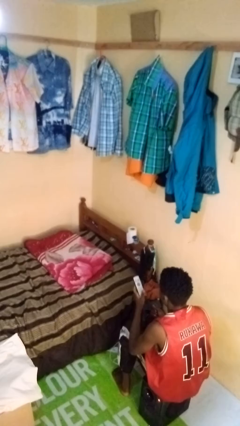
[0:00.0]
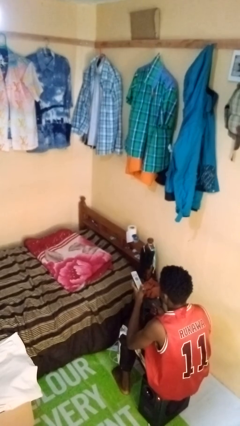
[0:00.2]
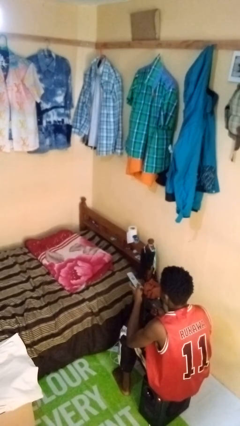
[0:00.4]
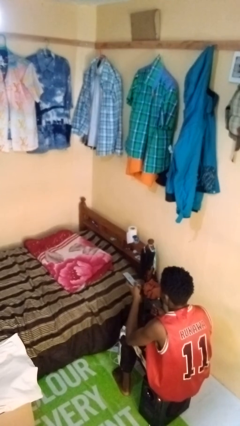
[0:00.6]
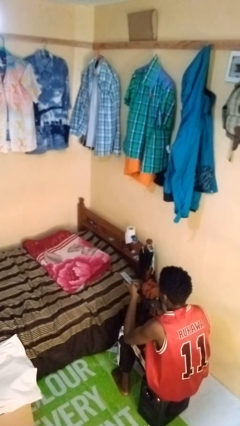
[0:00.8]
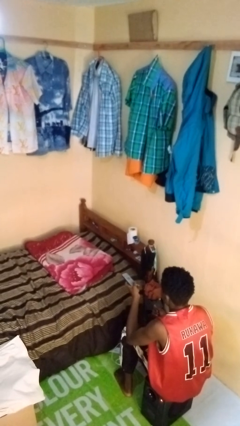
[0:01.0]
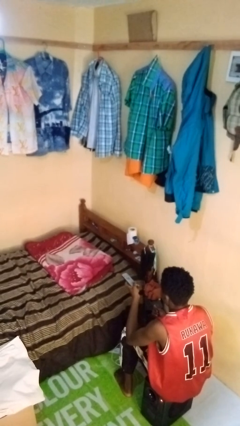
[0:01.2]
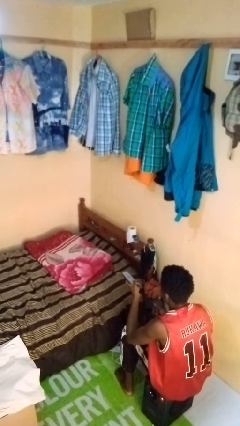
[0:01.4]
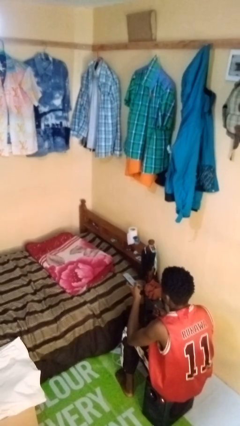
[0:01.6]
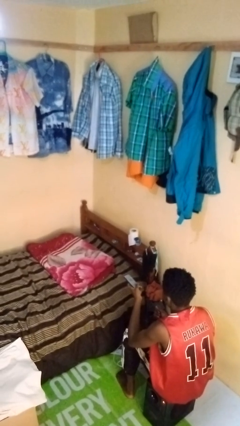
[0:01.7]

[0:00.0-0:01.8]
person uses television remote

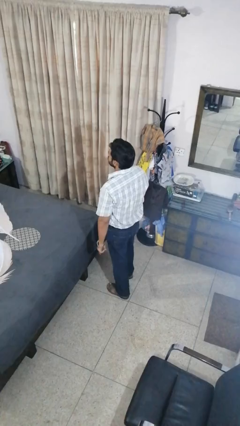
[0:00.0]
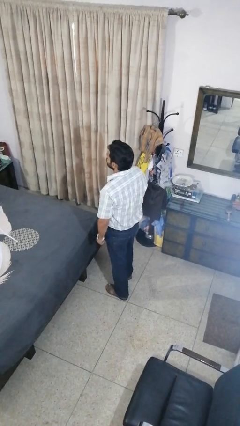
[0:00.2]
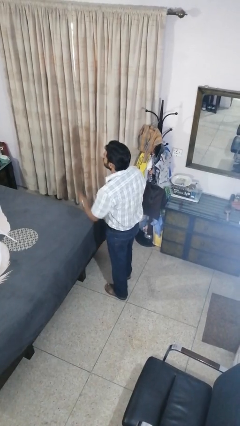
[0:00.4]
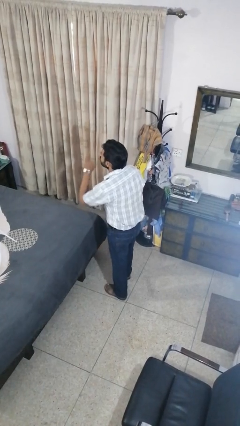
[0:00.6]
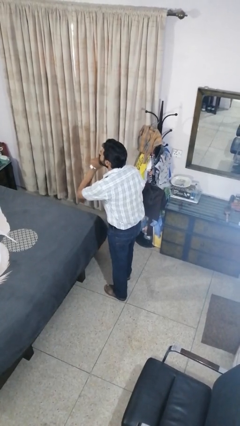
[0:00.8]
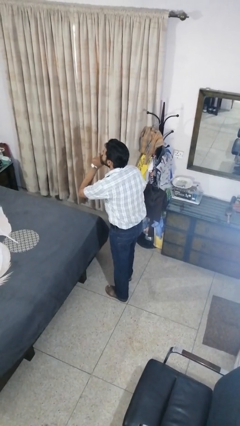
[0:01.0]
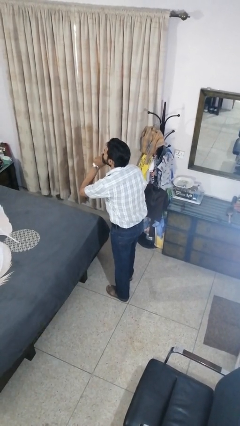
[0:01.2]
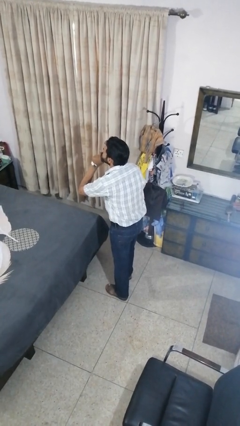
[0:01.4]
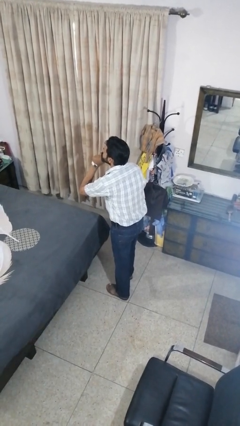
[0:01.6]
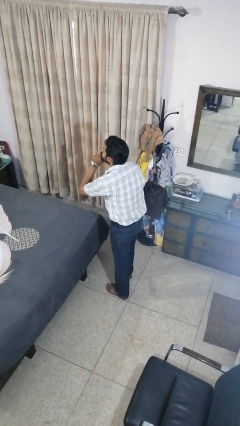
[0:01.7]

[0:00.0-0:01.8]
person gestures be quiet

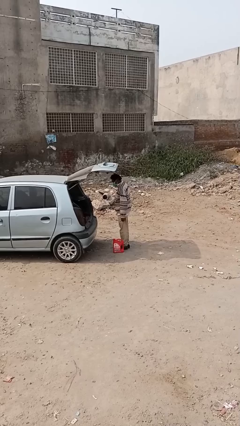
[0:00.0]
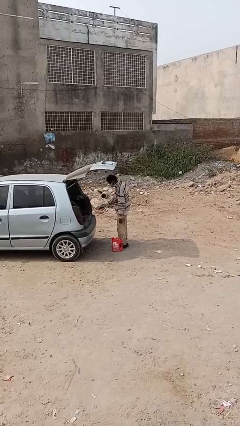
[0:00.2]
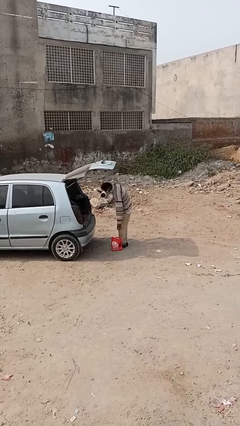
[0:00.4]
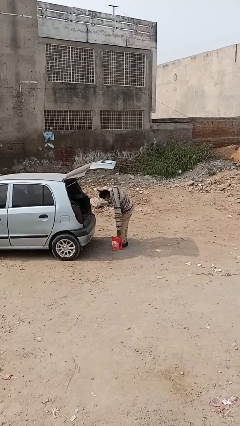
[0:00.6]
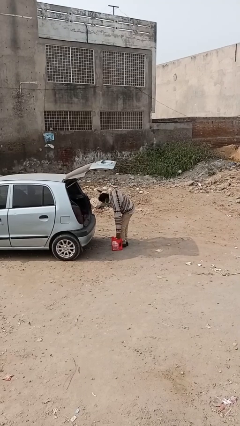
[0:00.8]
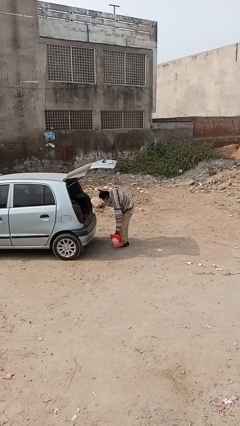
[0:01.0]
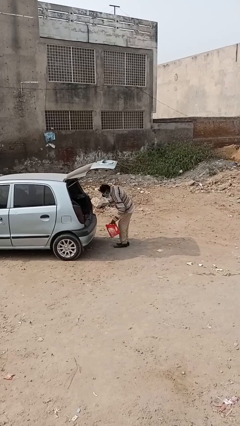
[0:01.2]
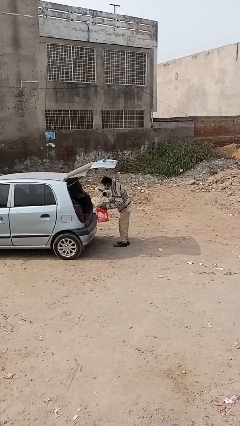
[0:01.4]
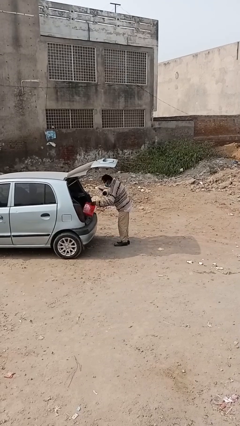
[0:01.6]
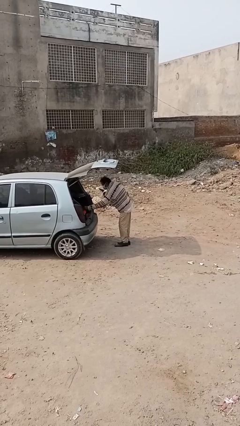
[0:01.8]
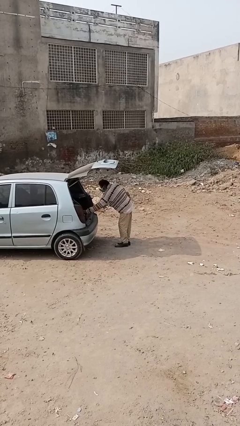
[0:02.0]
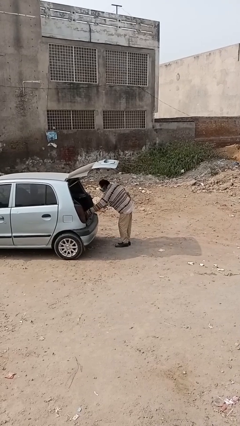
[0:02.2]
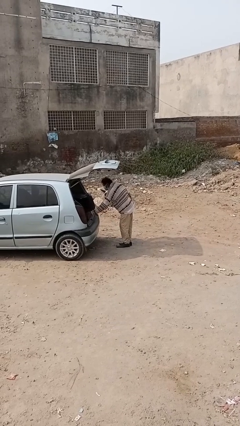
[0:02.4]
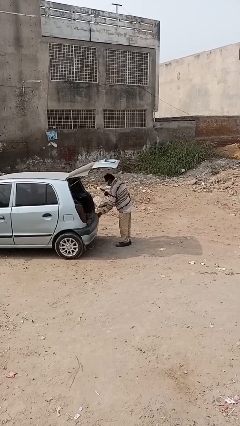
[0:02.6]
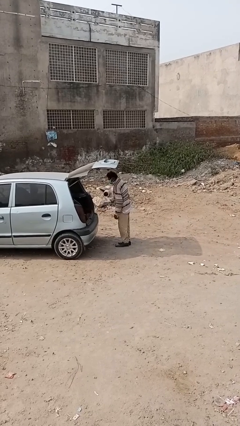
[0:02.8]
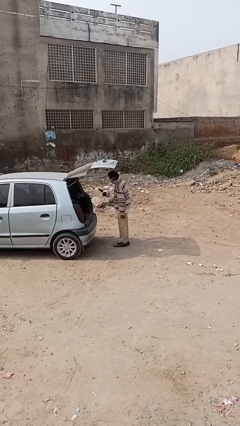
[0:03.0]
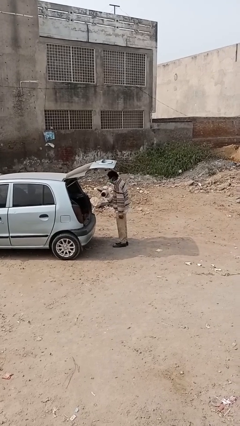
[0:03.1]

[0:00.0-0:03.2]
person loads car

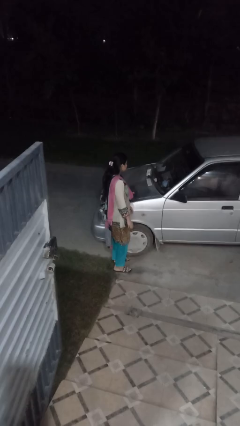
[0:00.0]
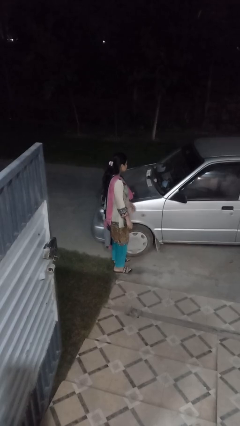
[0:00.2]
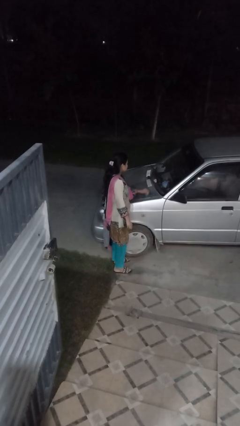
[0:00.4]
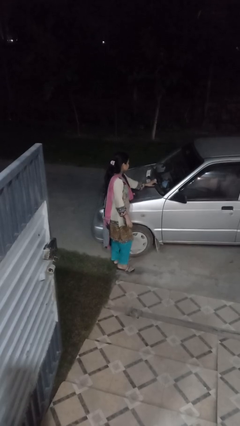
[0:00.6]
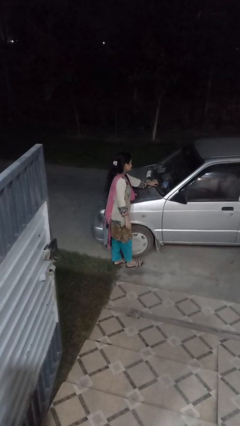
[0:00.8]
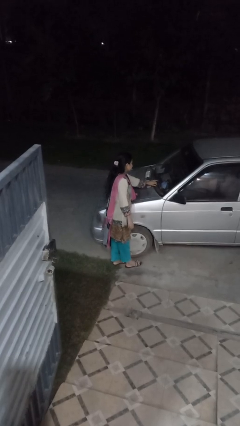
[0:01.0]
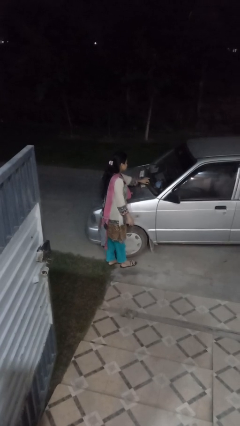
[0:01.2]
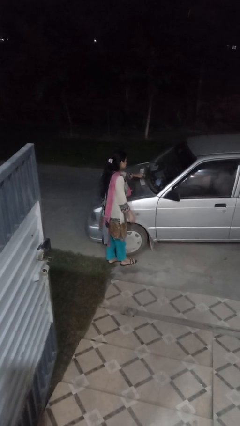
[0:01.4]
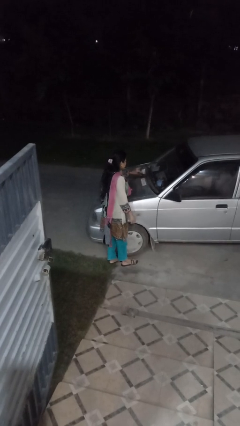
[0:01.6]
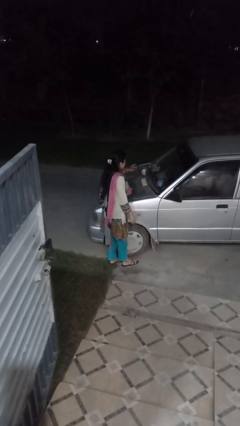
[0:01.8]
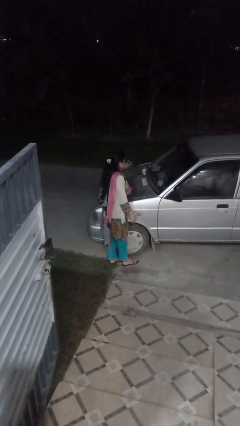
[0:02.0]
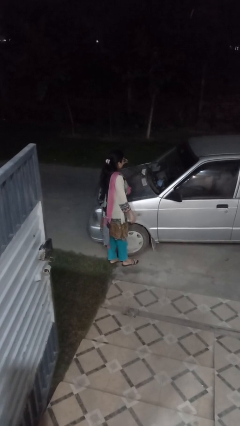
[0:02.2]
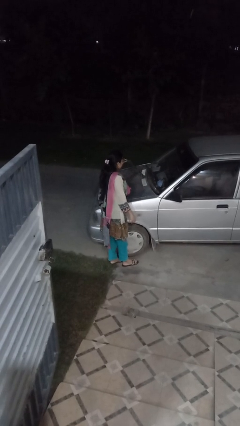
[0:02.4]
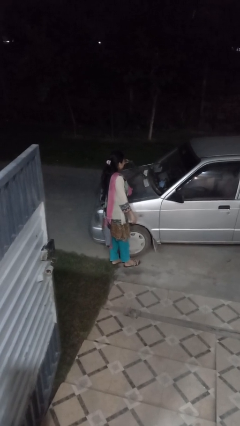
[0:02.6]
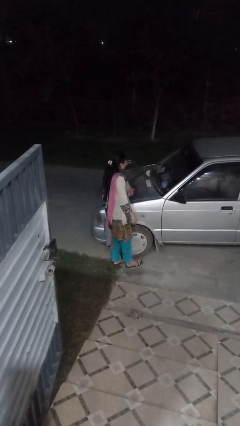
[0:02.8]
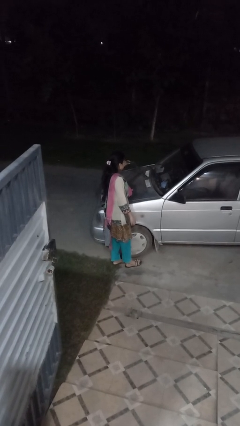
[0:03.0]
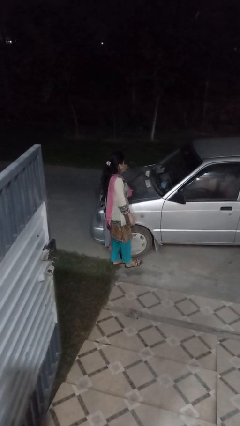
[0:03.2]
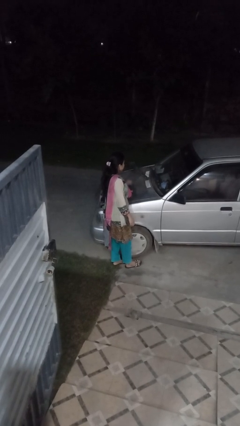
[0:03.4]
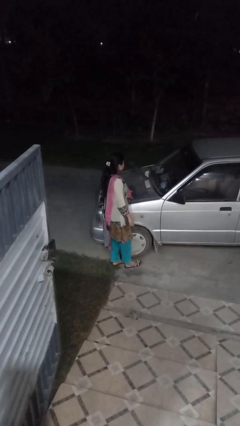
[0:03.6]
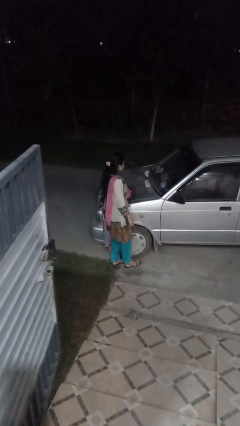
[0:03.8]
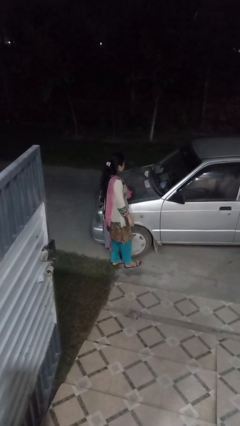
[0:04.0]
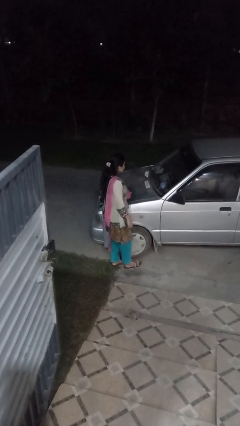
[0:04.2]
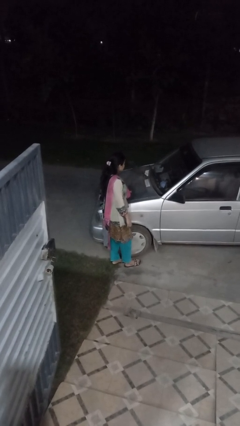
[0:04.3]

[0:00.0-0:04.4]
person flips up car wipers

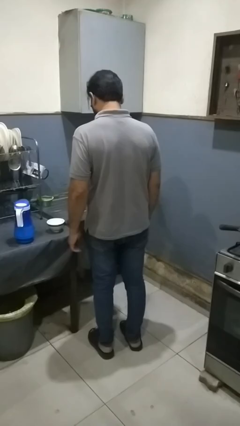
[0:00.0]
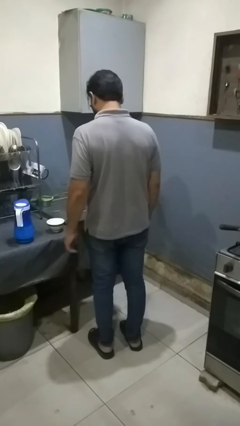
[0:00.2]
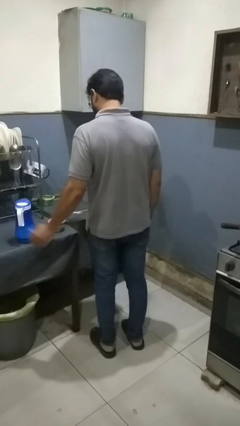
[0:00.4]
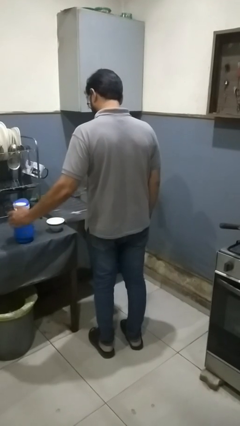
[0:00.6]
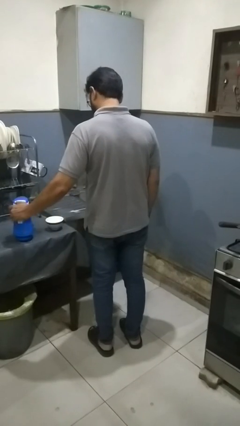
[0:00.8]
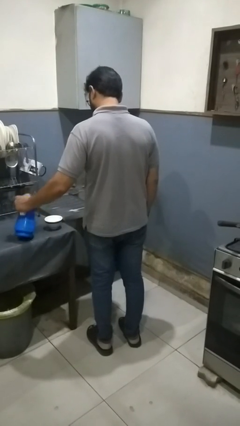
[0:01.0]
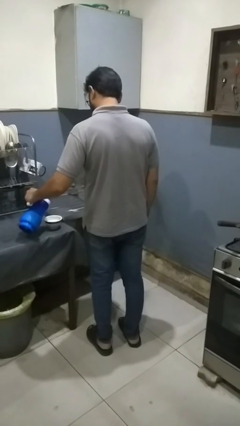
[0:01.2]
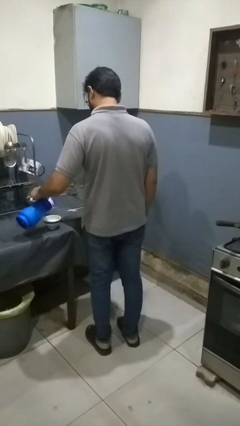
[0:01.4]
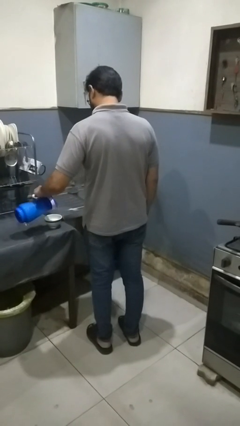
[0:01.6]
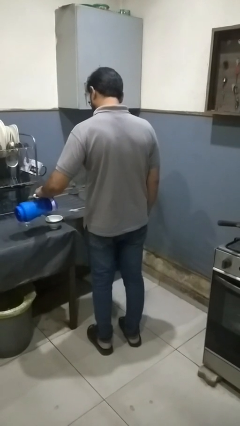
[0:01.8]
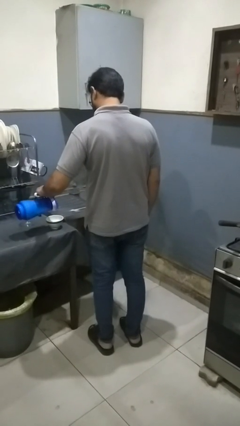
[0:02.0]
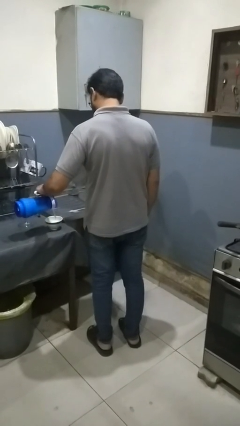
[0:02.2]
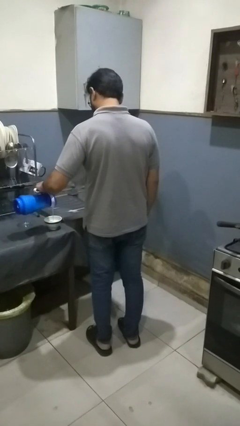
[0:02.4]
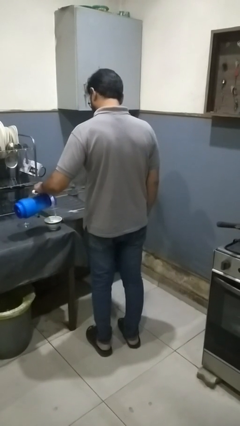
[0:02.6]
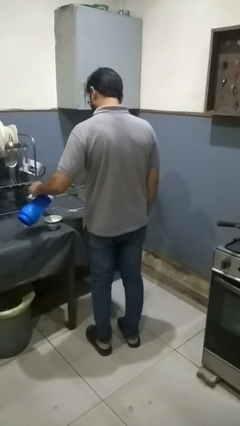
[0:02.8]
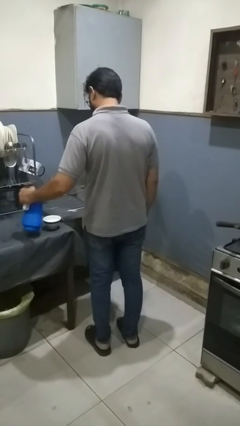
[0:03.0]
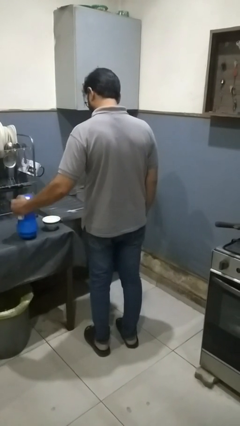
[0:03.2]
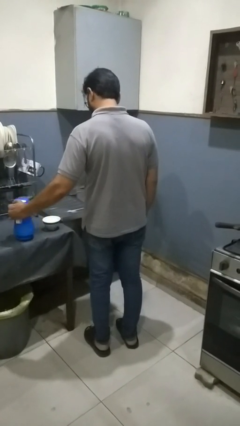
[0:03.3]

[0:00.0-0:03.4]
person pours into bowl

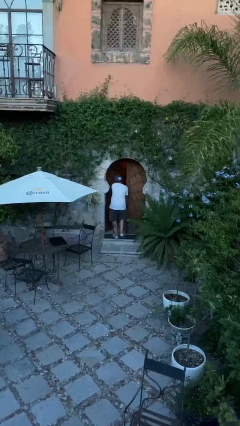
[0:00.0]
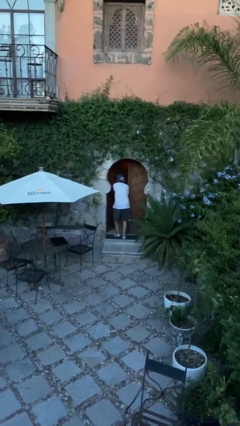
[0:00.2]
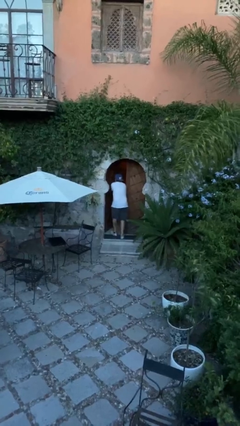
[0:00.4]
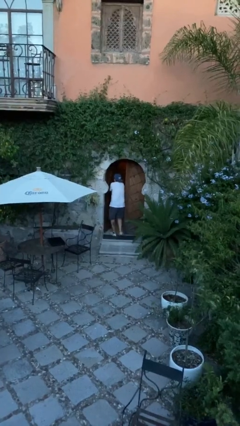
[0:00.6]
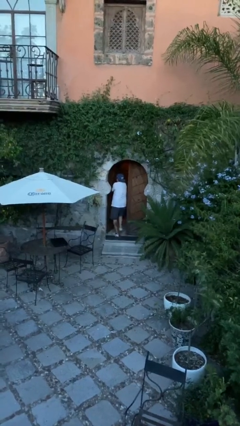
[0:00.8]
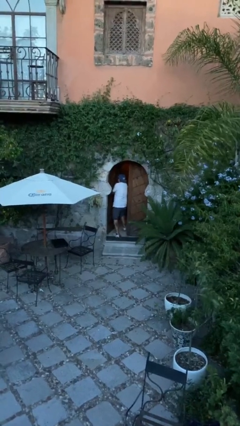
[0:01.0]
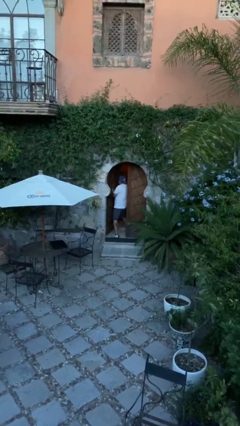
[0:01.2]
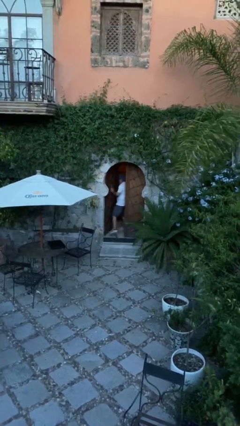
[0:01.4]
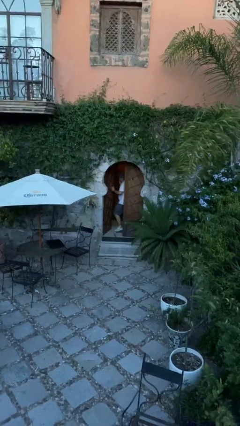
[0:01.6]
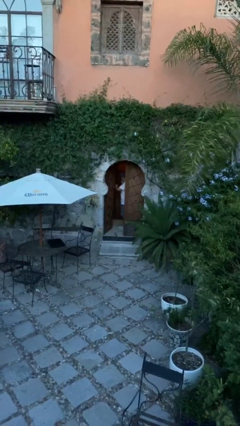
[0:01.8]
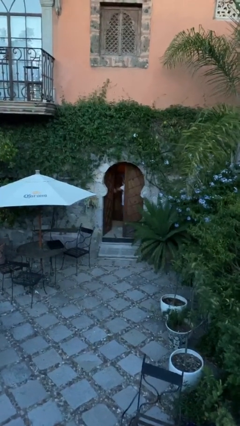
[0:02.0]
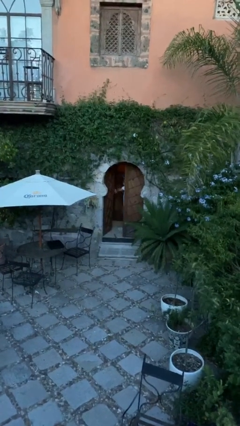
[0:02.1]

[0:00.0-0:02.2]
person exits scene through structure

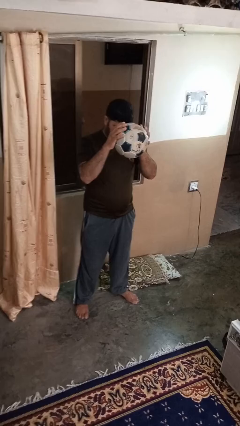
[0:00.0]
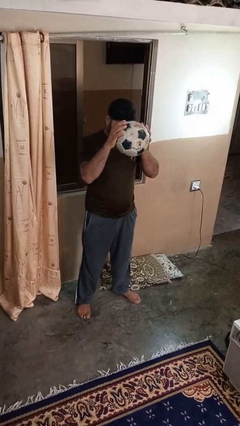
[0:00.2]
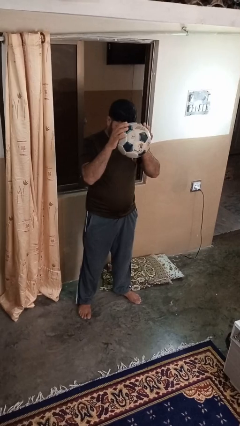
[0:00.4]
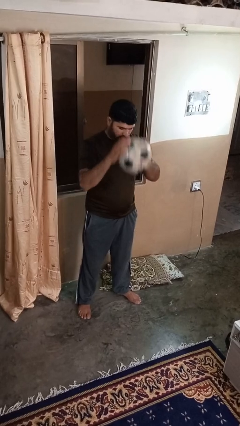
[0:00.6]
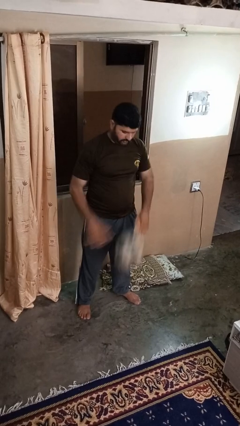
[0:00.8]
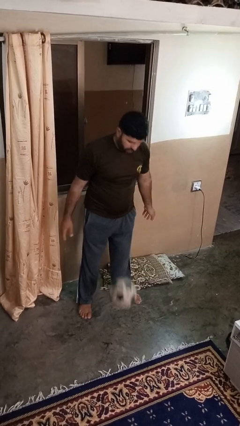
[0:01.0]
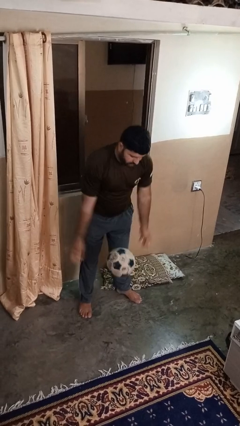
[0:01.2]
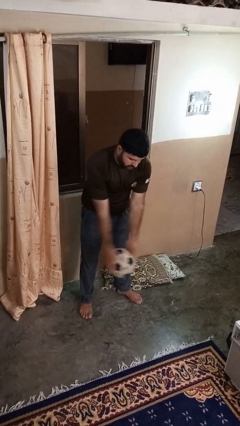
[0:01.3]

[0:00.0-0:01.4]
person bounces ball on floor
